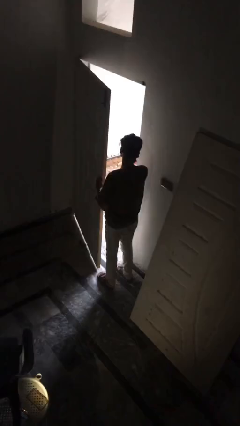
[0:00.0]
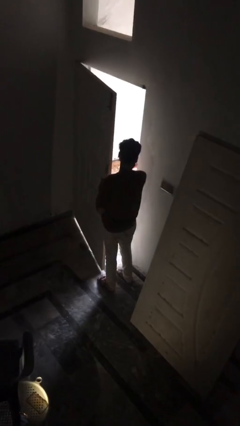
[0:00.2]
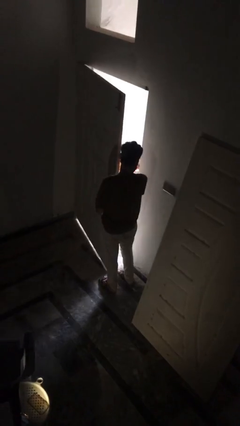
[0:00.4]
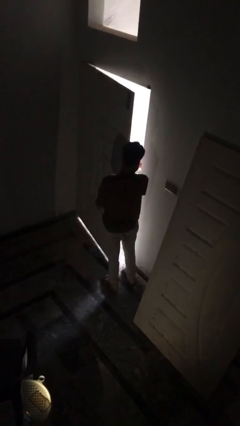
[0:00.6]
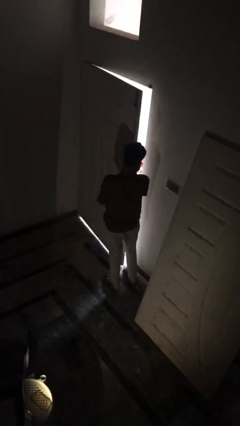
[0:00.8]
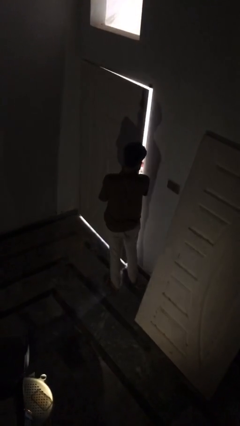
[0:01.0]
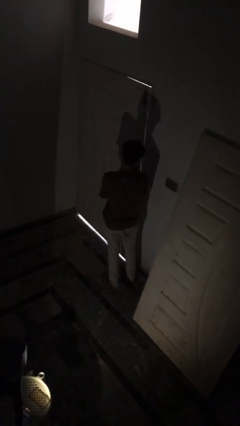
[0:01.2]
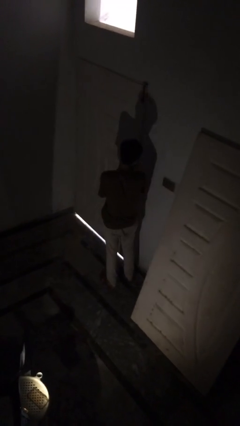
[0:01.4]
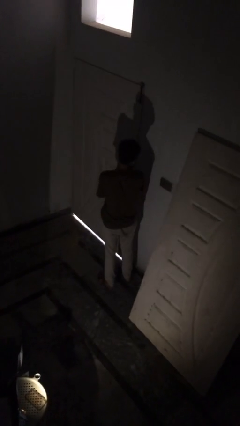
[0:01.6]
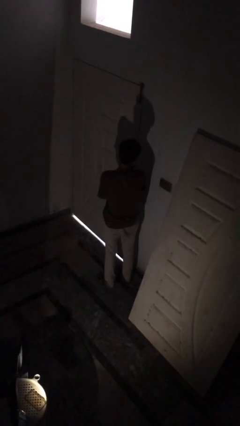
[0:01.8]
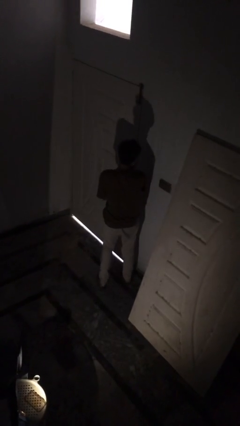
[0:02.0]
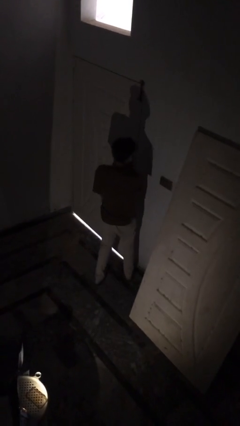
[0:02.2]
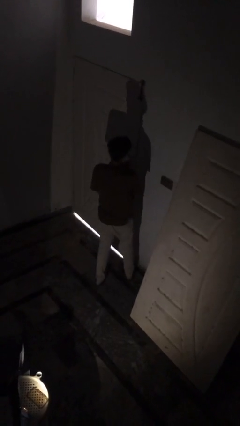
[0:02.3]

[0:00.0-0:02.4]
person closes facility door

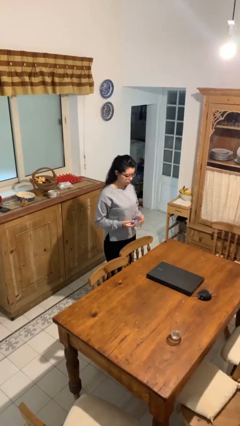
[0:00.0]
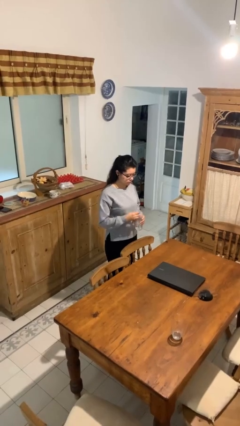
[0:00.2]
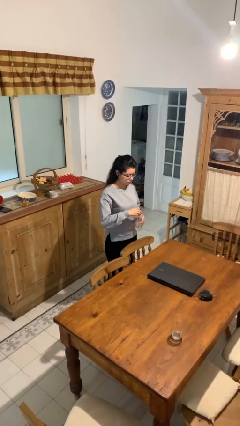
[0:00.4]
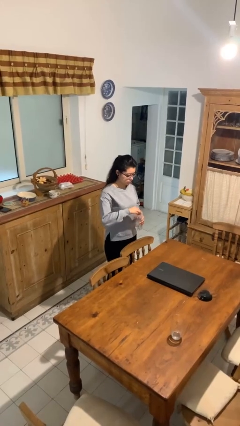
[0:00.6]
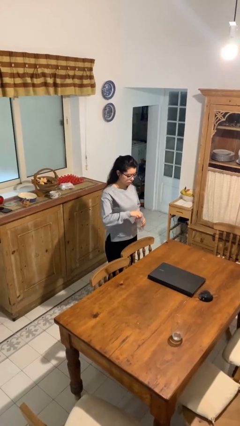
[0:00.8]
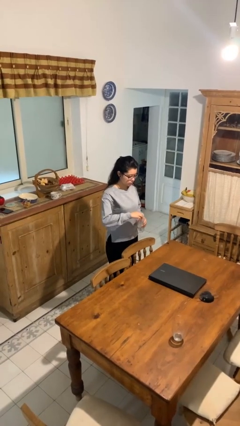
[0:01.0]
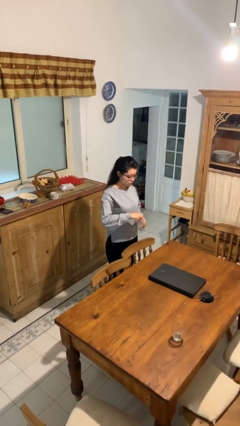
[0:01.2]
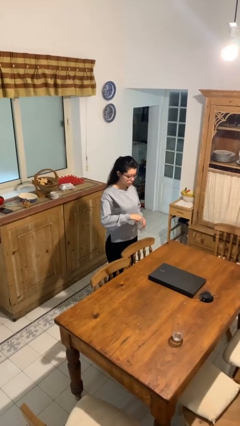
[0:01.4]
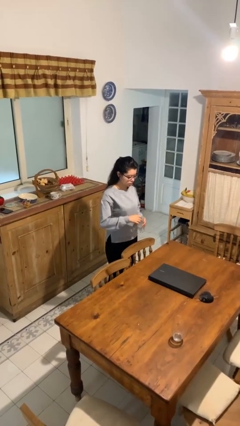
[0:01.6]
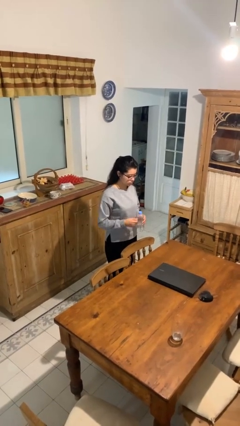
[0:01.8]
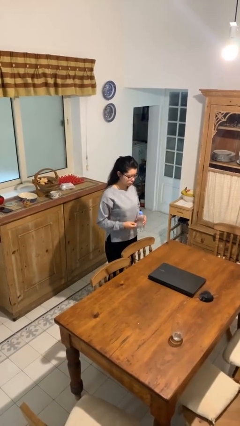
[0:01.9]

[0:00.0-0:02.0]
person screws lid to bottle

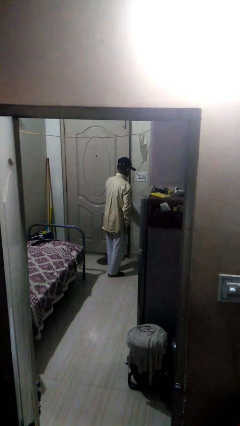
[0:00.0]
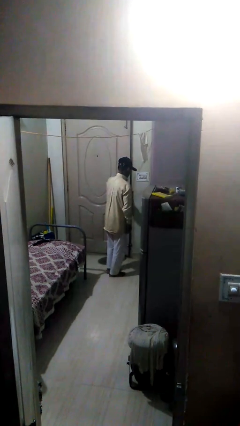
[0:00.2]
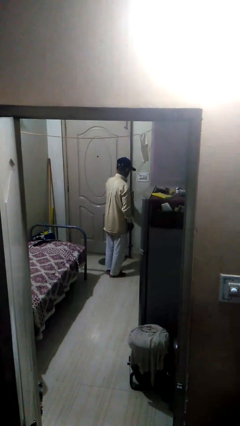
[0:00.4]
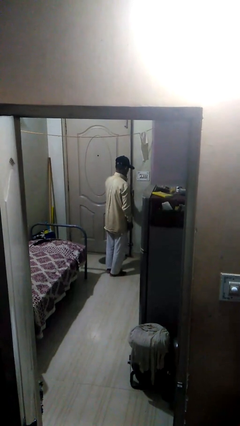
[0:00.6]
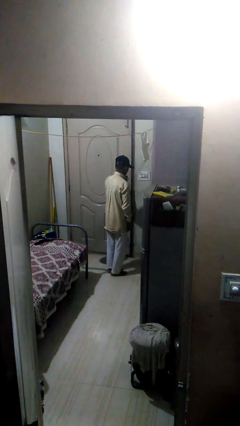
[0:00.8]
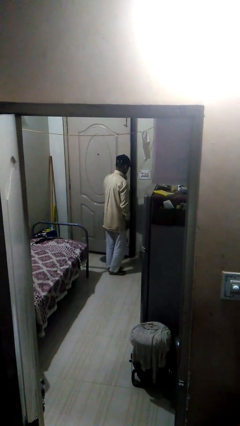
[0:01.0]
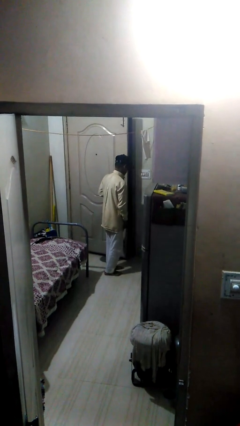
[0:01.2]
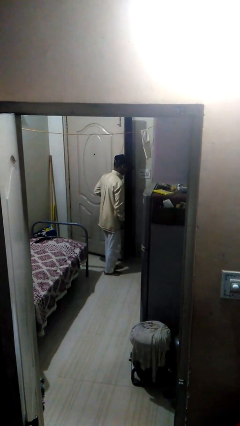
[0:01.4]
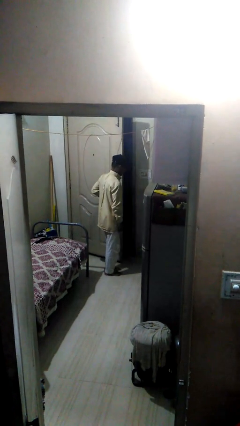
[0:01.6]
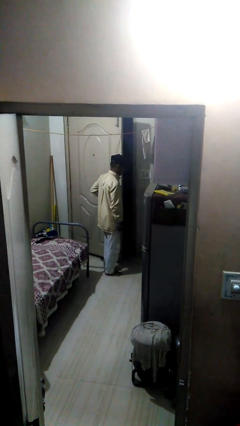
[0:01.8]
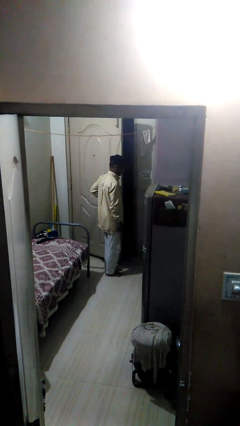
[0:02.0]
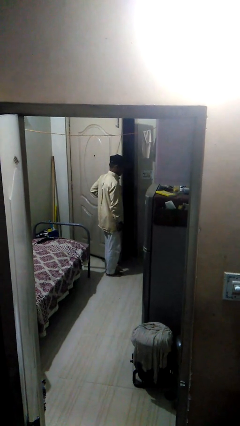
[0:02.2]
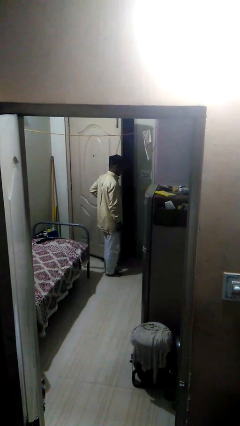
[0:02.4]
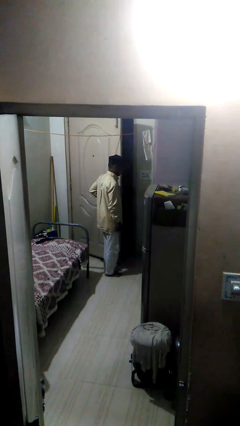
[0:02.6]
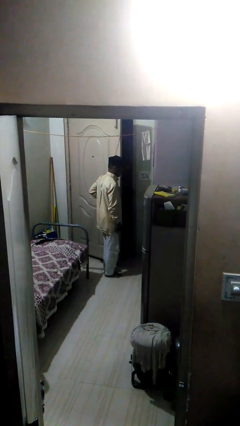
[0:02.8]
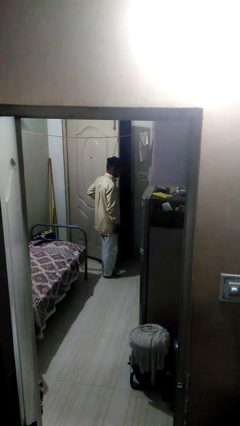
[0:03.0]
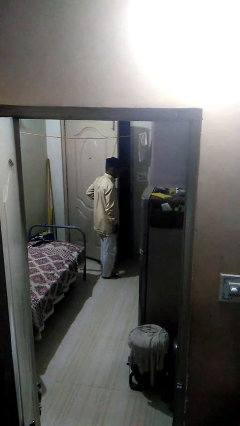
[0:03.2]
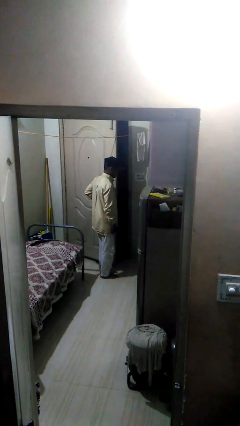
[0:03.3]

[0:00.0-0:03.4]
person opens facility door

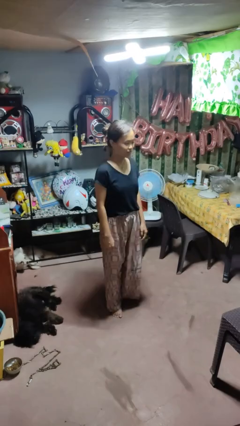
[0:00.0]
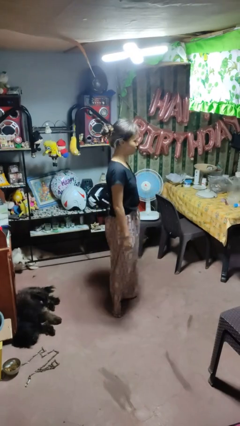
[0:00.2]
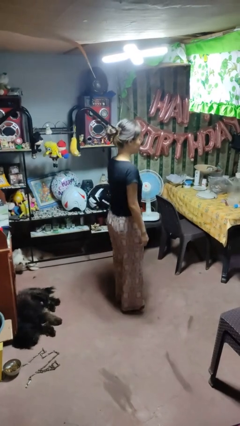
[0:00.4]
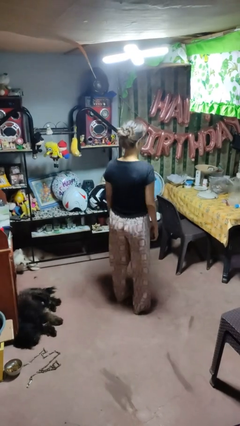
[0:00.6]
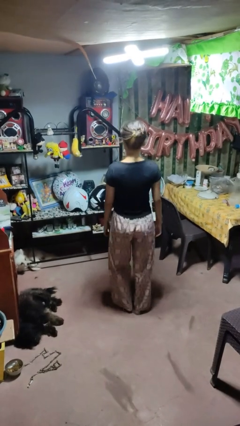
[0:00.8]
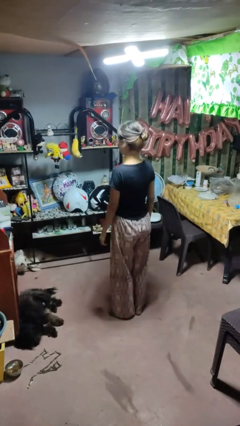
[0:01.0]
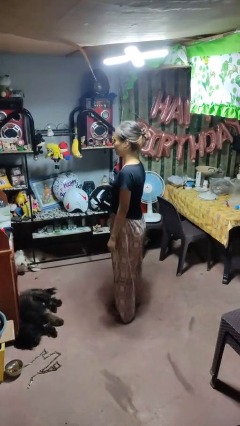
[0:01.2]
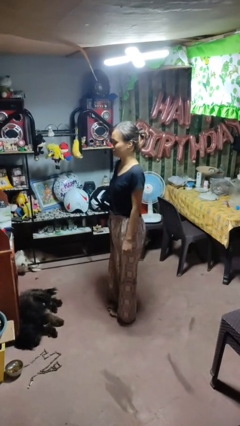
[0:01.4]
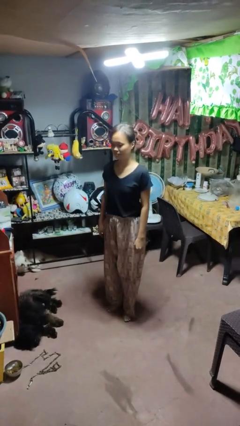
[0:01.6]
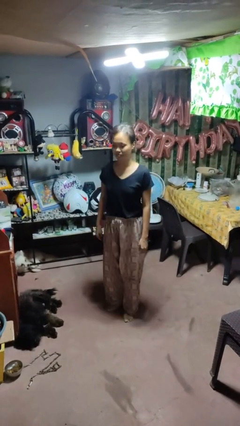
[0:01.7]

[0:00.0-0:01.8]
person twirls

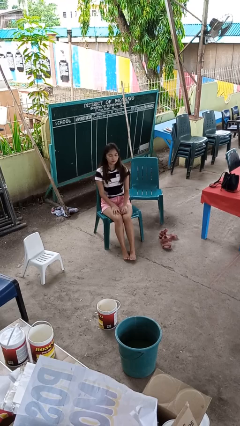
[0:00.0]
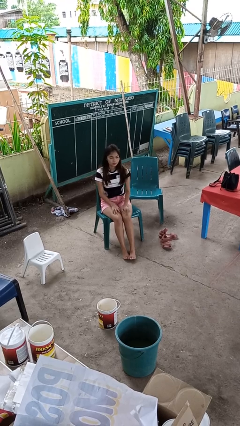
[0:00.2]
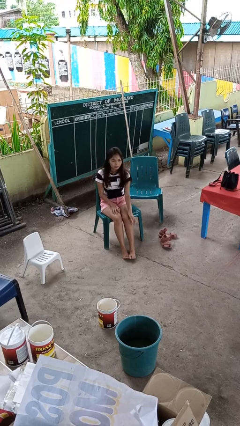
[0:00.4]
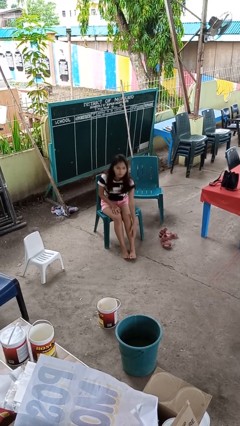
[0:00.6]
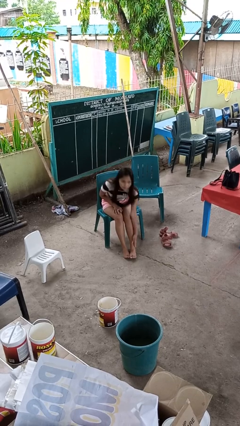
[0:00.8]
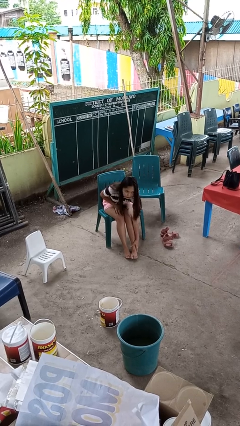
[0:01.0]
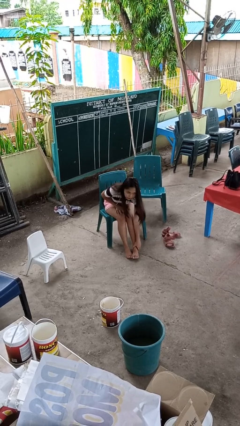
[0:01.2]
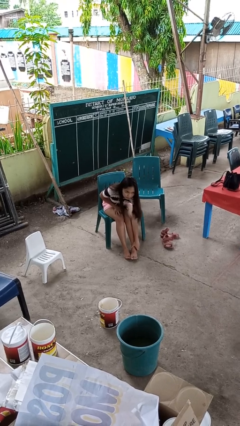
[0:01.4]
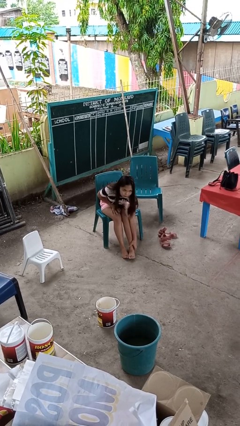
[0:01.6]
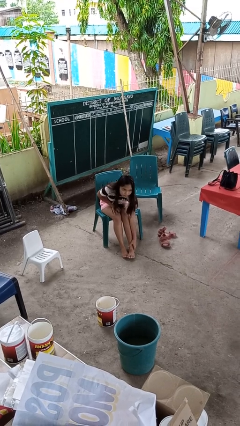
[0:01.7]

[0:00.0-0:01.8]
person rubs foot

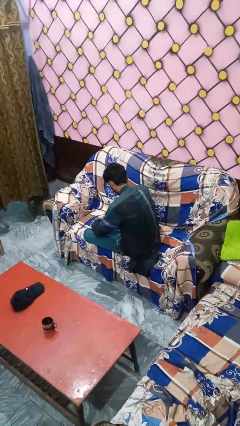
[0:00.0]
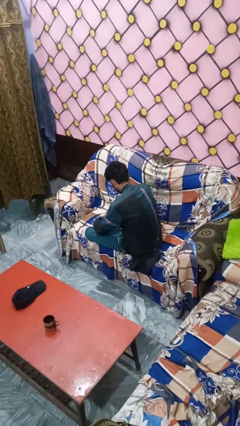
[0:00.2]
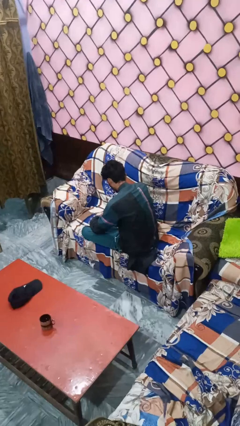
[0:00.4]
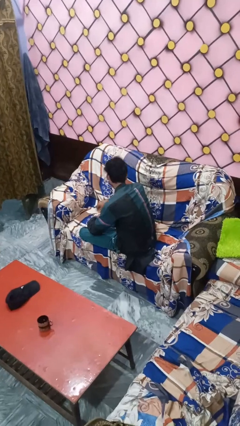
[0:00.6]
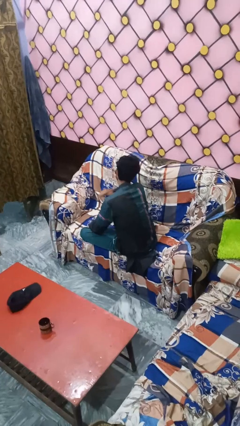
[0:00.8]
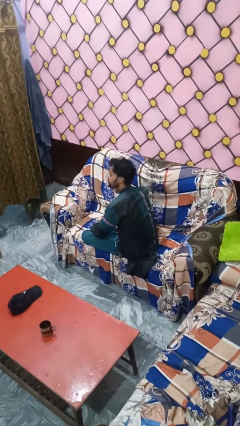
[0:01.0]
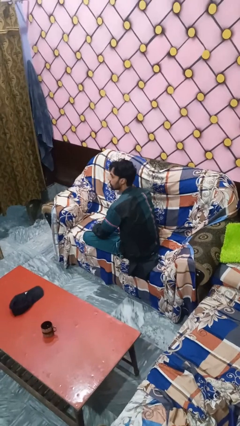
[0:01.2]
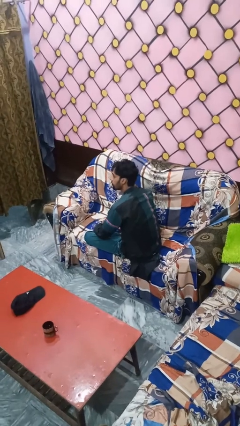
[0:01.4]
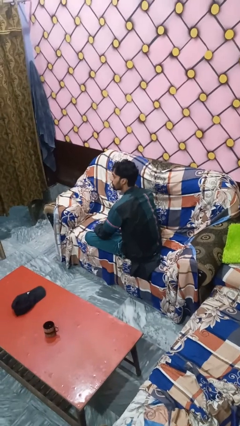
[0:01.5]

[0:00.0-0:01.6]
person gestures cut

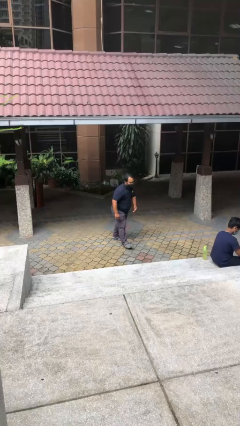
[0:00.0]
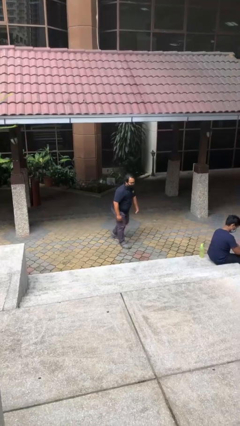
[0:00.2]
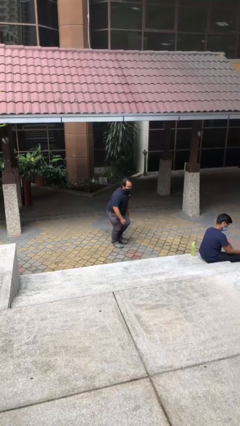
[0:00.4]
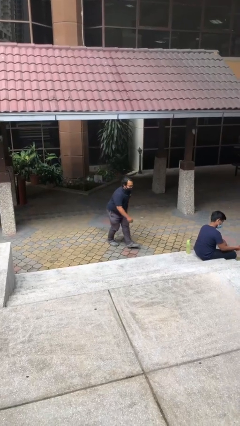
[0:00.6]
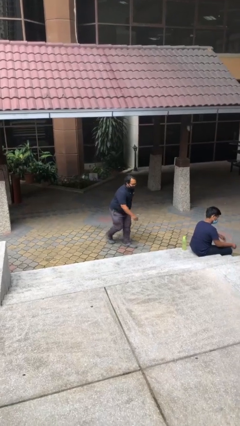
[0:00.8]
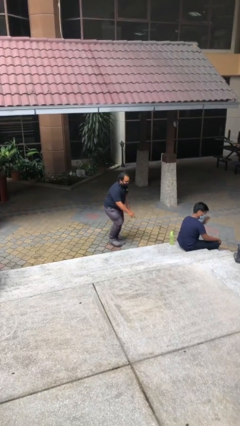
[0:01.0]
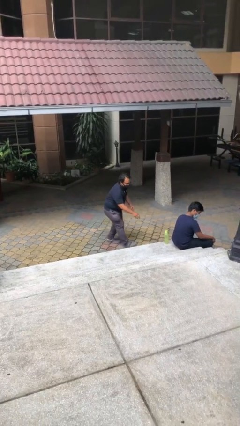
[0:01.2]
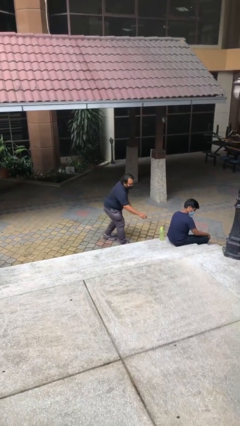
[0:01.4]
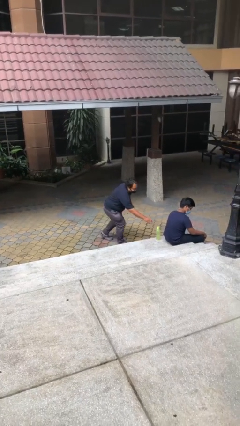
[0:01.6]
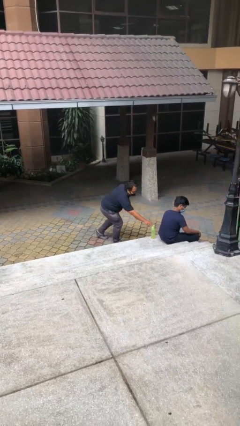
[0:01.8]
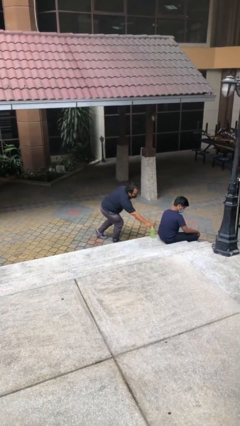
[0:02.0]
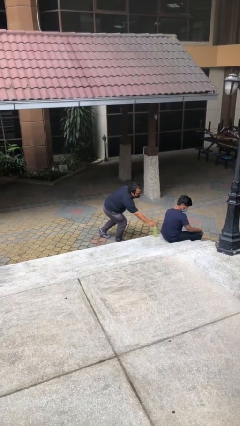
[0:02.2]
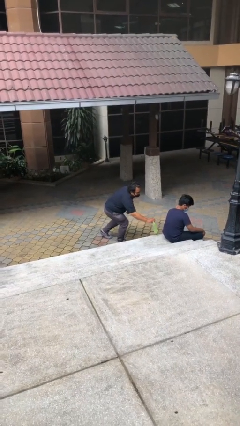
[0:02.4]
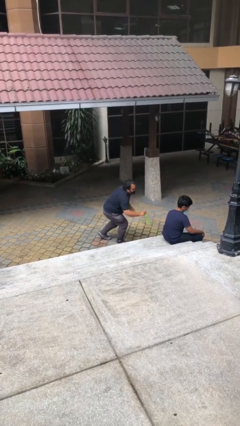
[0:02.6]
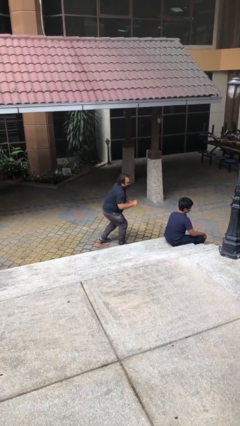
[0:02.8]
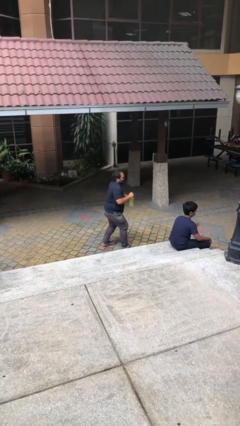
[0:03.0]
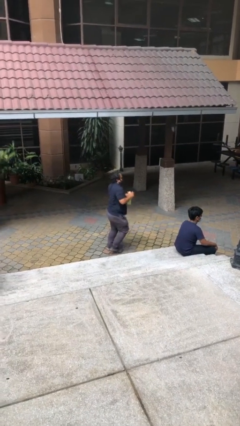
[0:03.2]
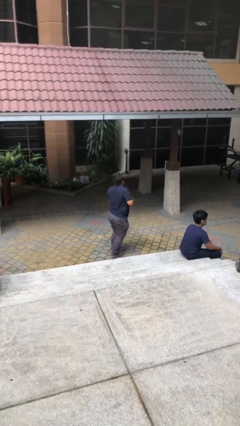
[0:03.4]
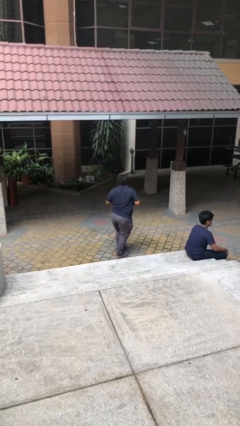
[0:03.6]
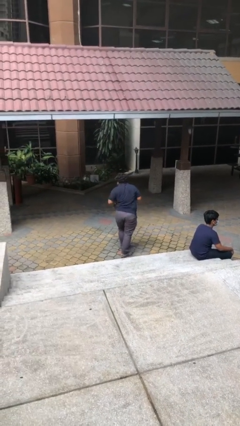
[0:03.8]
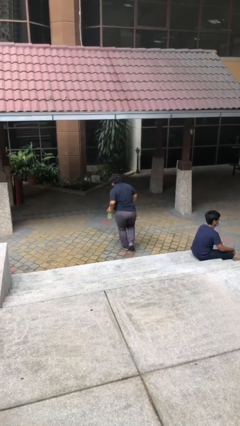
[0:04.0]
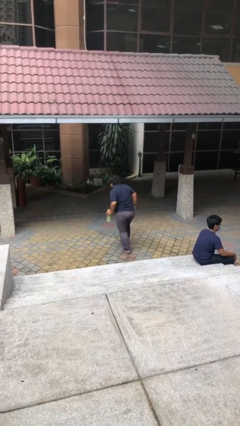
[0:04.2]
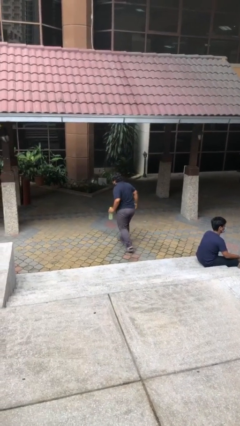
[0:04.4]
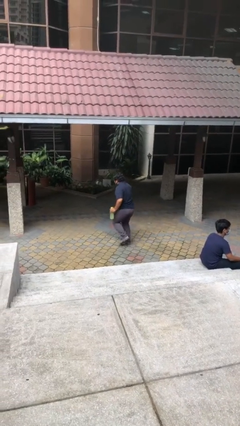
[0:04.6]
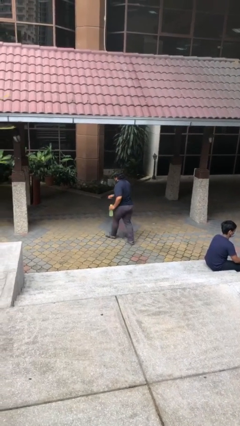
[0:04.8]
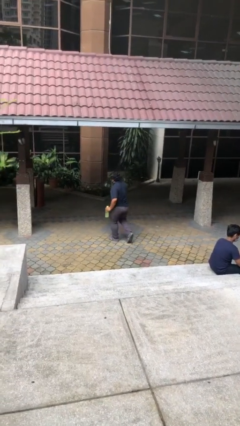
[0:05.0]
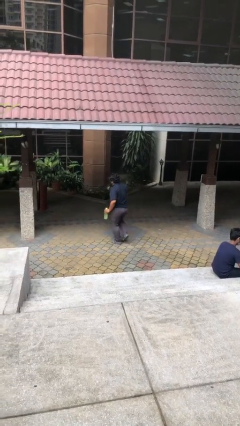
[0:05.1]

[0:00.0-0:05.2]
person steals object from person
